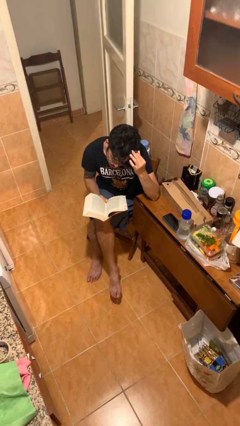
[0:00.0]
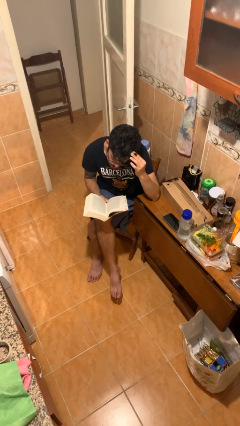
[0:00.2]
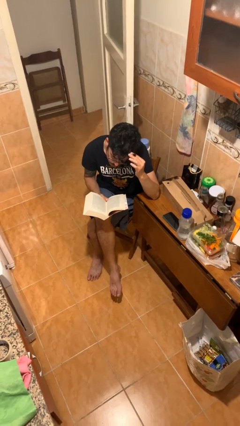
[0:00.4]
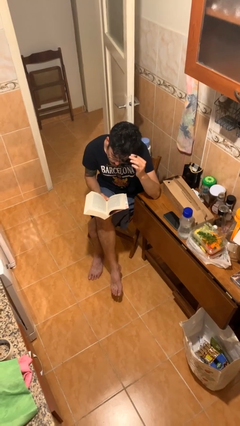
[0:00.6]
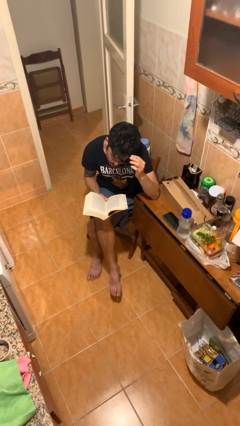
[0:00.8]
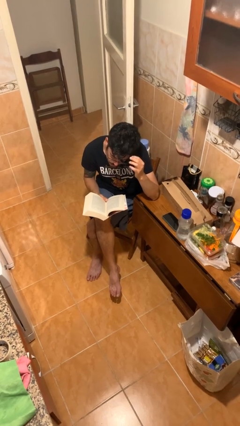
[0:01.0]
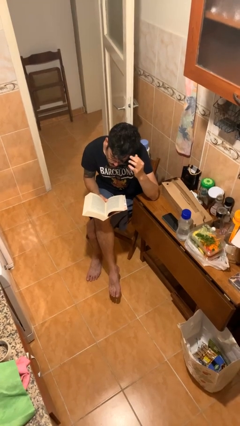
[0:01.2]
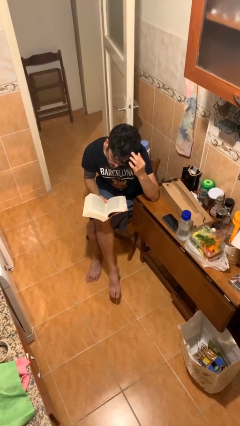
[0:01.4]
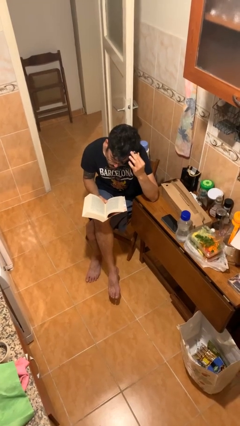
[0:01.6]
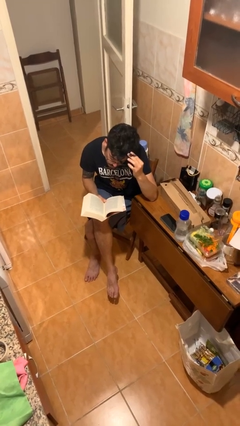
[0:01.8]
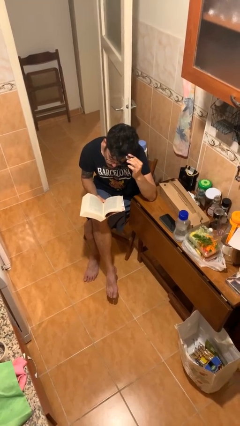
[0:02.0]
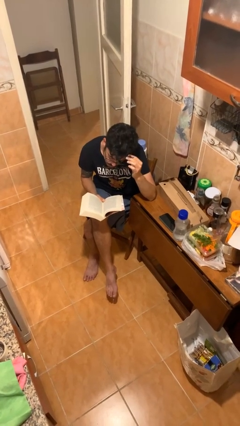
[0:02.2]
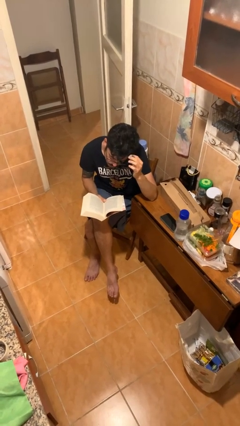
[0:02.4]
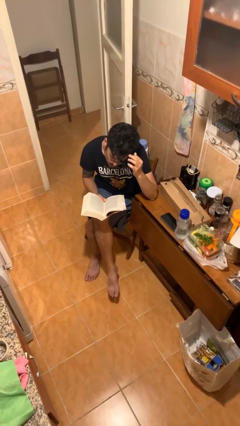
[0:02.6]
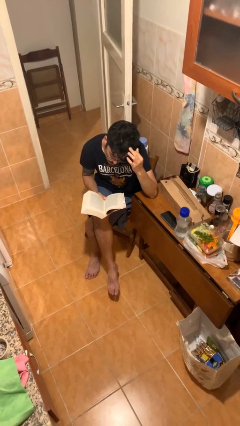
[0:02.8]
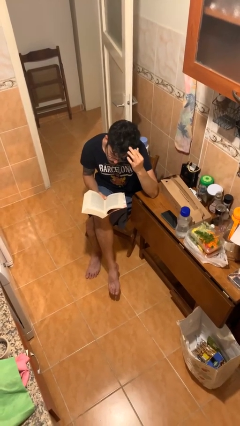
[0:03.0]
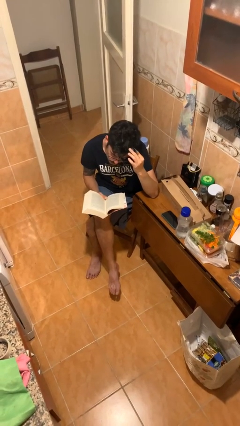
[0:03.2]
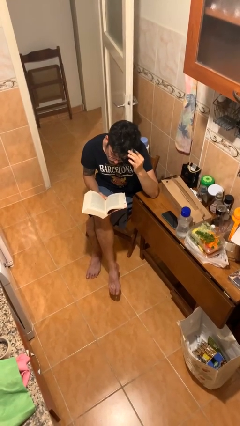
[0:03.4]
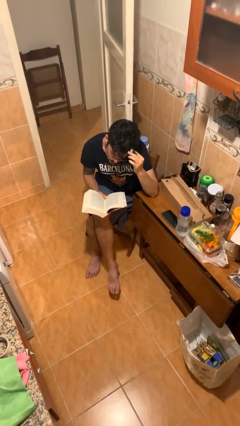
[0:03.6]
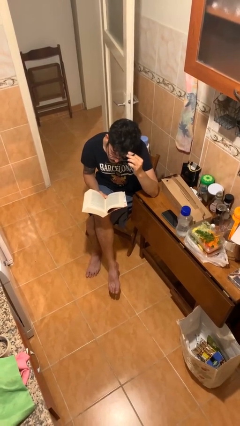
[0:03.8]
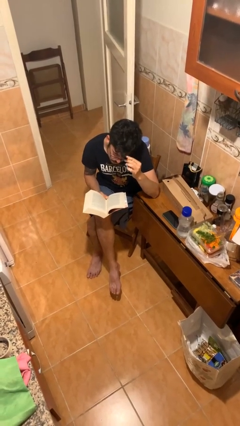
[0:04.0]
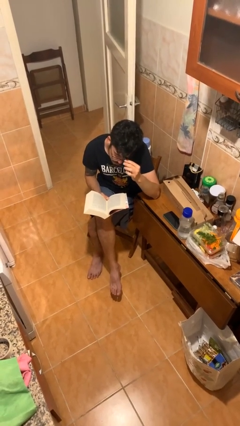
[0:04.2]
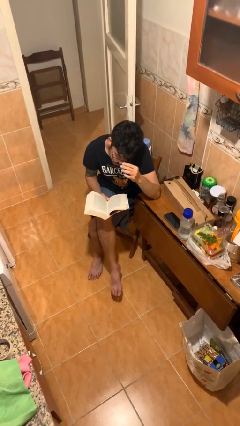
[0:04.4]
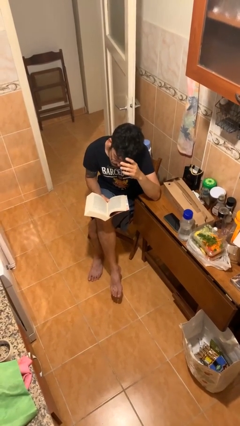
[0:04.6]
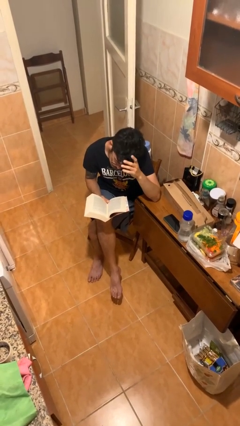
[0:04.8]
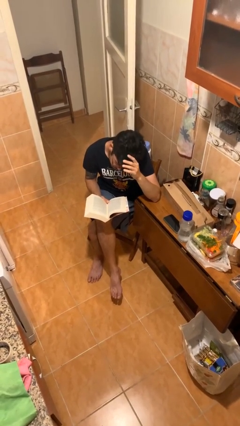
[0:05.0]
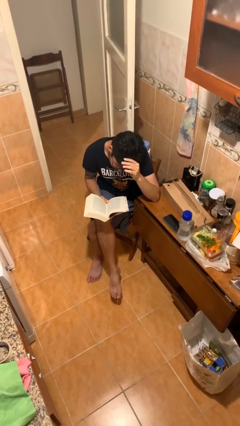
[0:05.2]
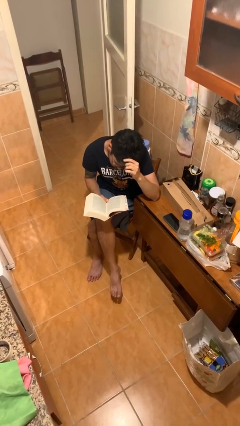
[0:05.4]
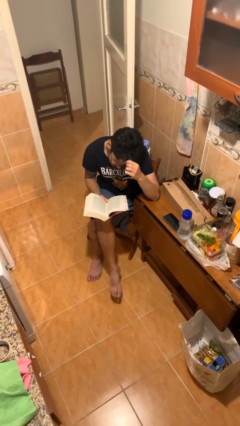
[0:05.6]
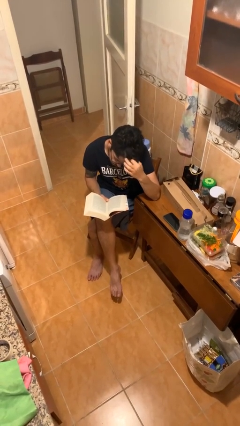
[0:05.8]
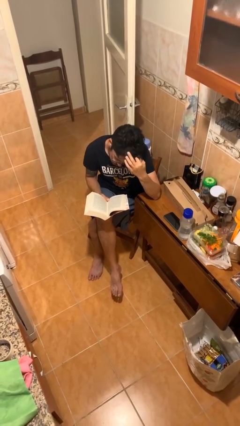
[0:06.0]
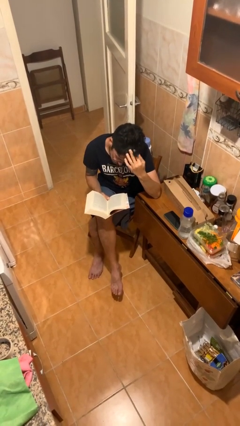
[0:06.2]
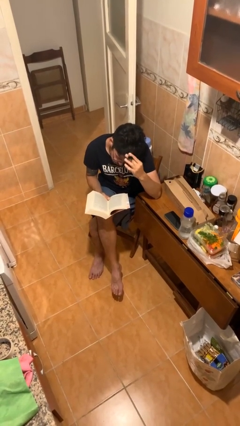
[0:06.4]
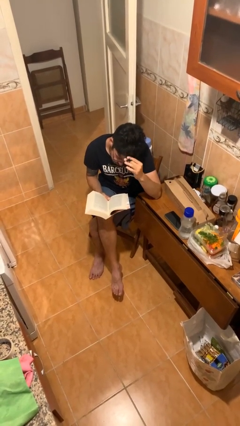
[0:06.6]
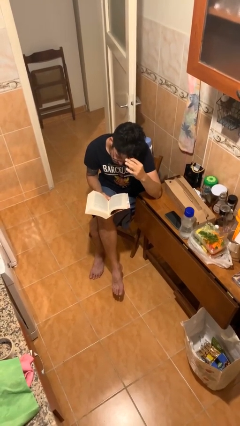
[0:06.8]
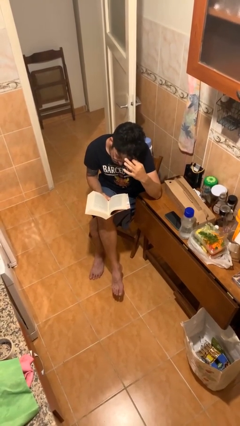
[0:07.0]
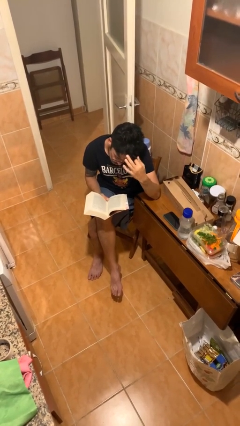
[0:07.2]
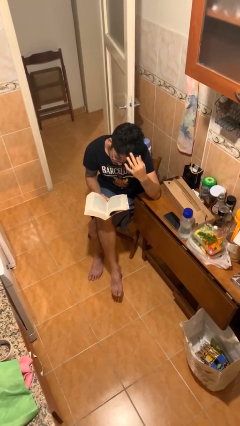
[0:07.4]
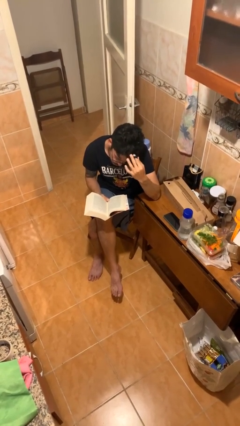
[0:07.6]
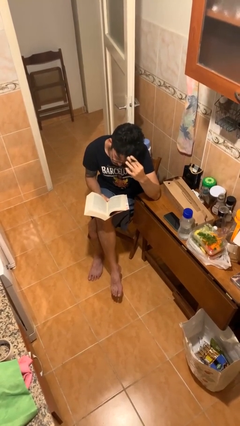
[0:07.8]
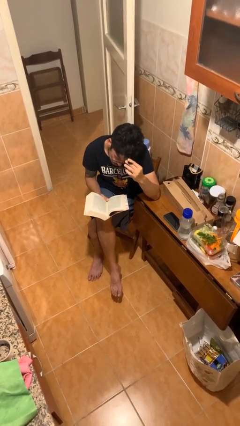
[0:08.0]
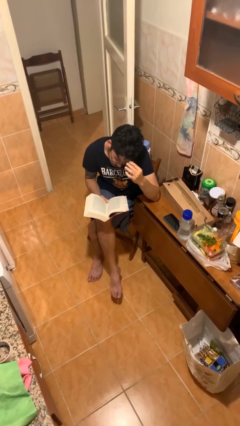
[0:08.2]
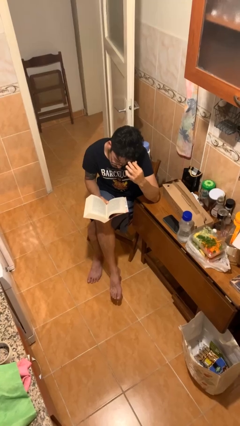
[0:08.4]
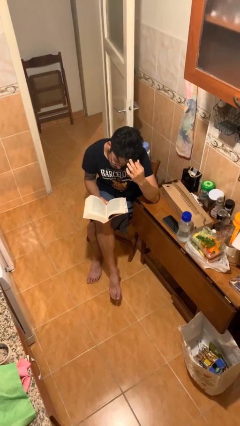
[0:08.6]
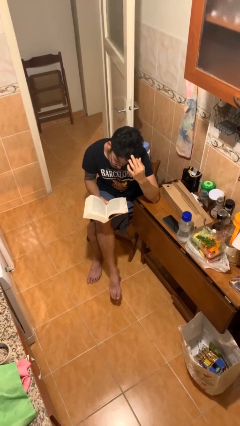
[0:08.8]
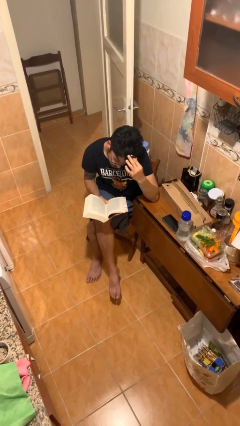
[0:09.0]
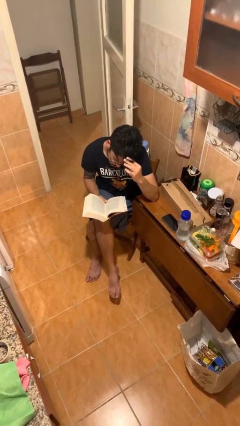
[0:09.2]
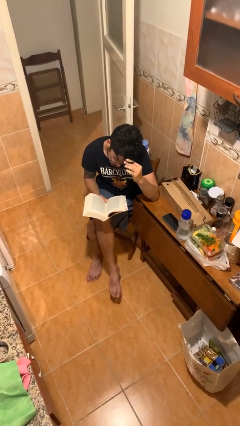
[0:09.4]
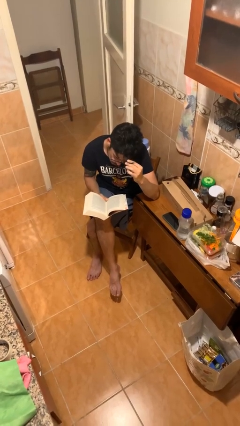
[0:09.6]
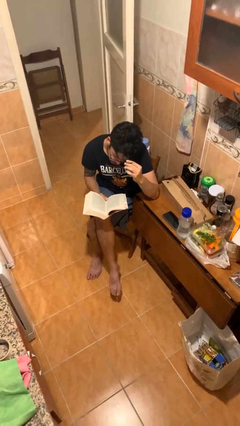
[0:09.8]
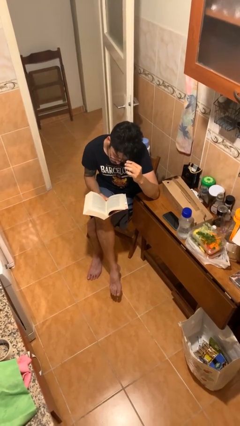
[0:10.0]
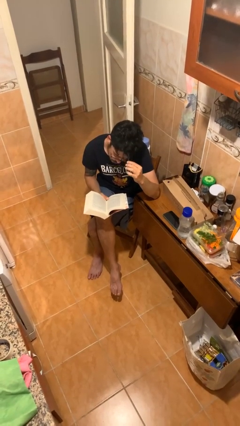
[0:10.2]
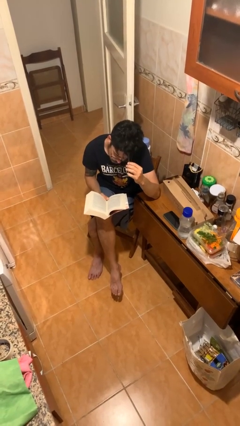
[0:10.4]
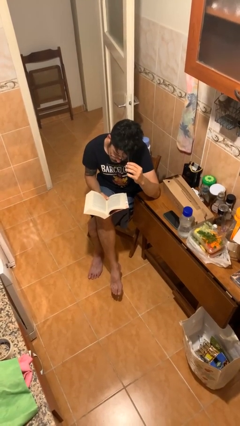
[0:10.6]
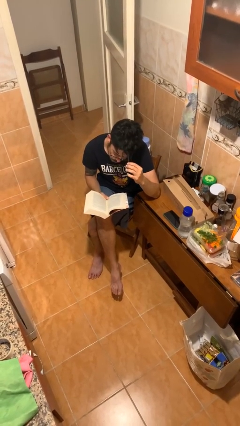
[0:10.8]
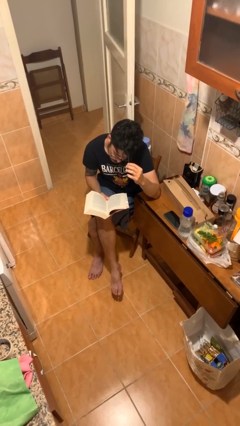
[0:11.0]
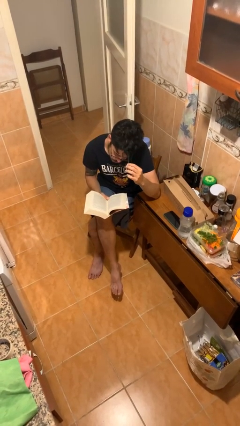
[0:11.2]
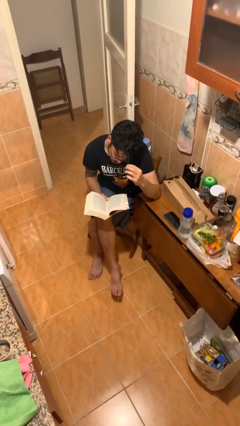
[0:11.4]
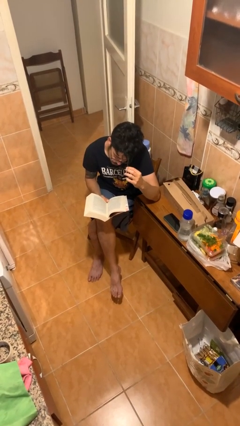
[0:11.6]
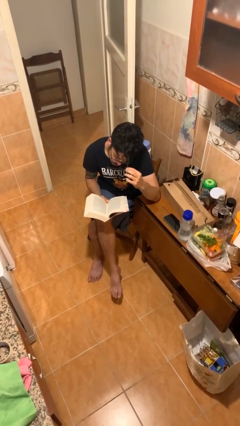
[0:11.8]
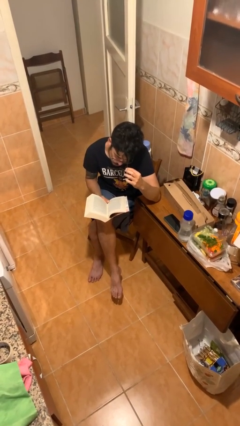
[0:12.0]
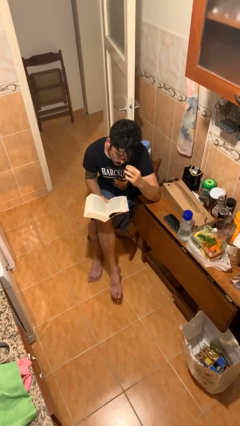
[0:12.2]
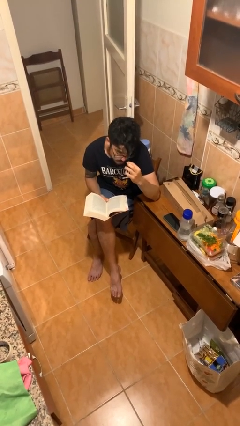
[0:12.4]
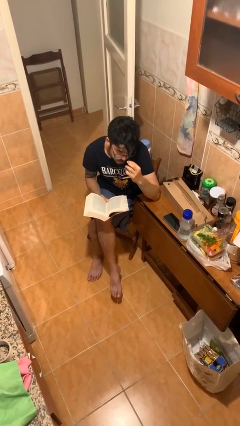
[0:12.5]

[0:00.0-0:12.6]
person reads document

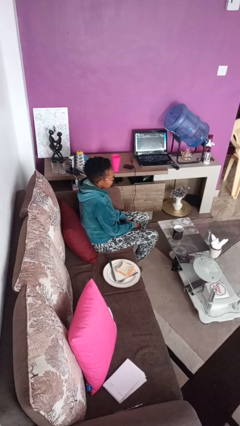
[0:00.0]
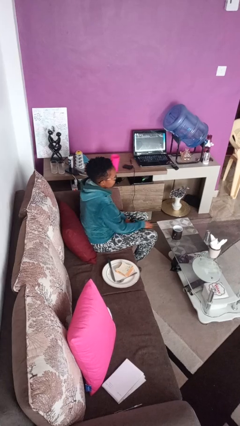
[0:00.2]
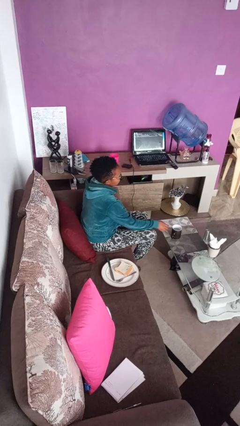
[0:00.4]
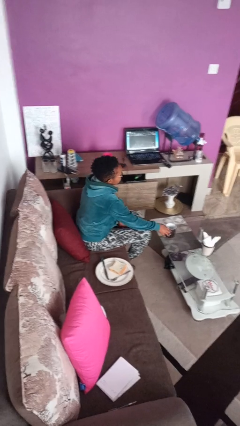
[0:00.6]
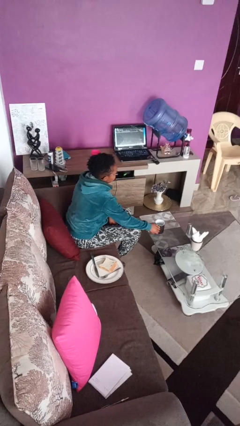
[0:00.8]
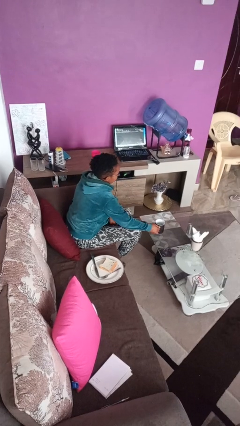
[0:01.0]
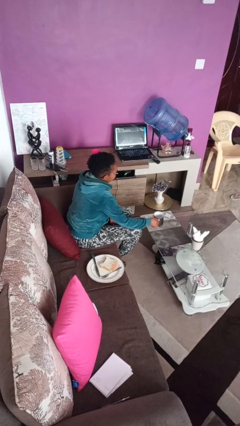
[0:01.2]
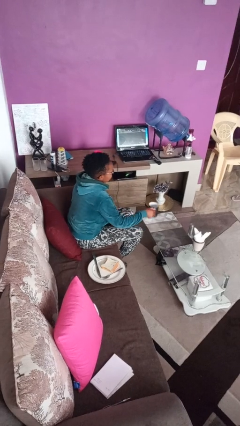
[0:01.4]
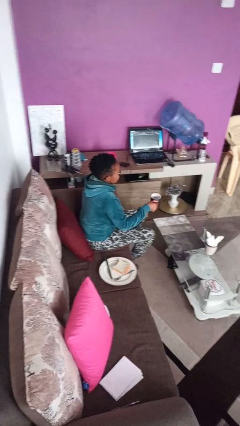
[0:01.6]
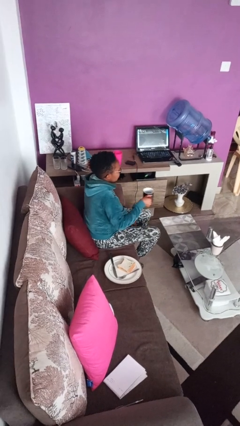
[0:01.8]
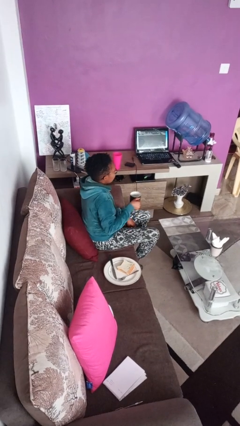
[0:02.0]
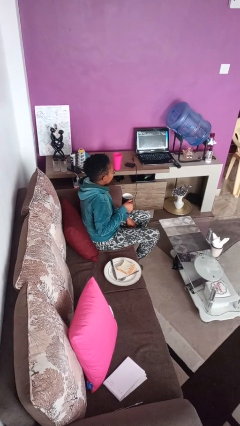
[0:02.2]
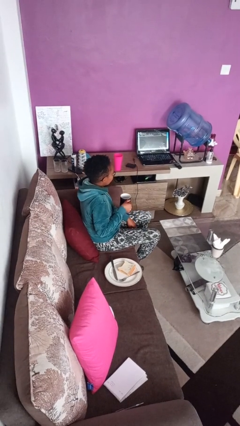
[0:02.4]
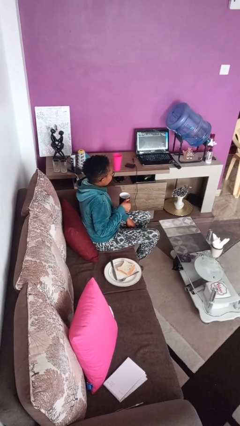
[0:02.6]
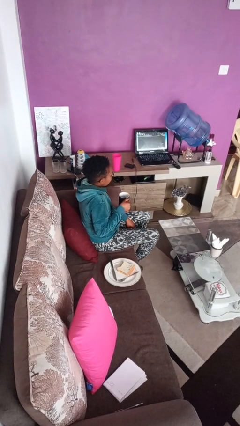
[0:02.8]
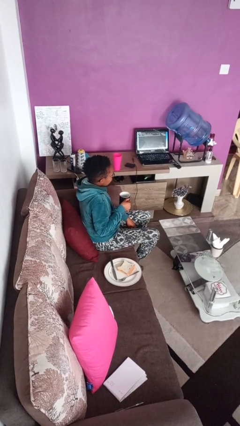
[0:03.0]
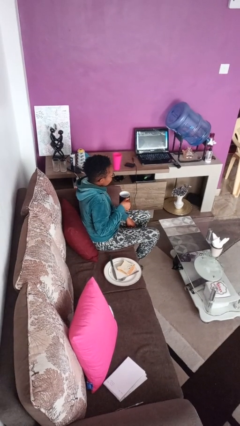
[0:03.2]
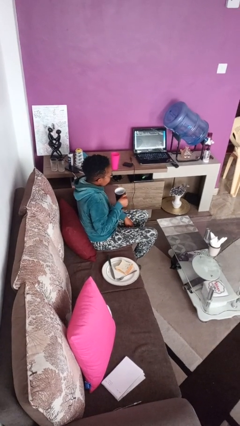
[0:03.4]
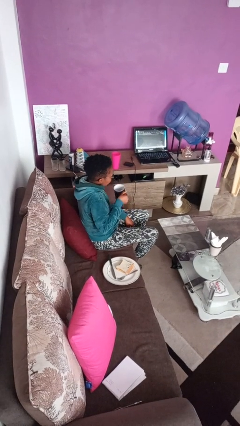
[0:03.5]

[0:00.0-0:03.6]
person picks up object from table

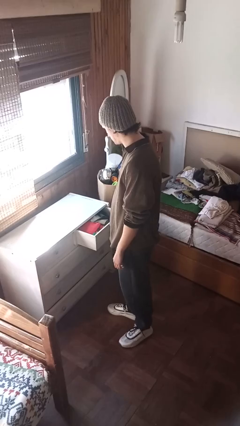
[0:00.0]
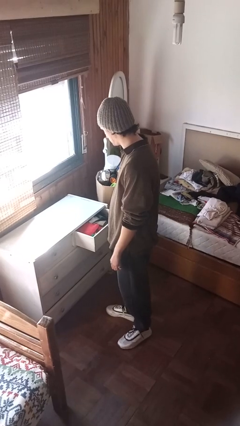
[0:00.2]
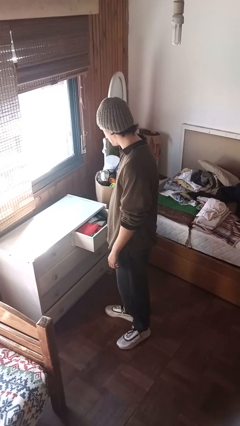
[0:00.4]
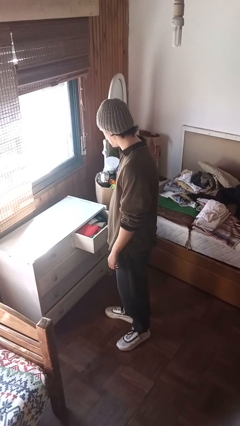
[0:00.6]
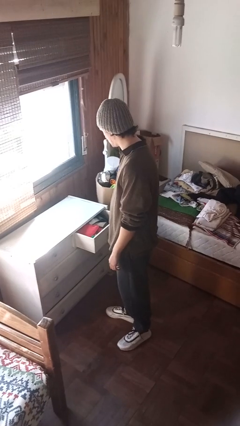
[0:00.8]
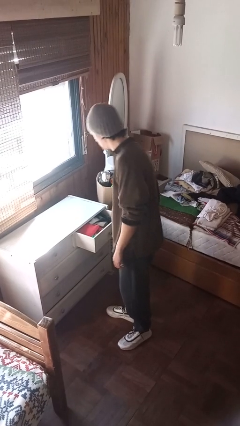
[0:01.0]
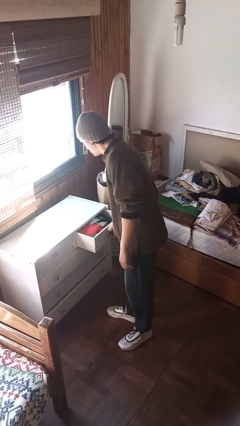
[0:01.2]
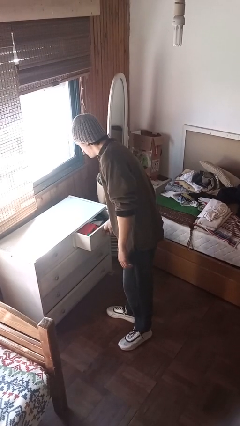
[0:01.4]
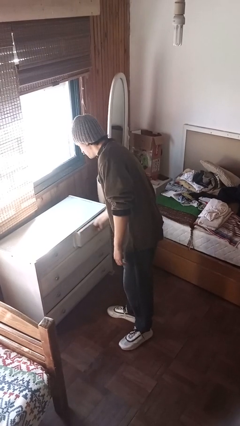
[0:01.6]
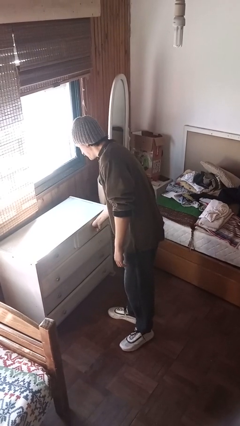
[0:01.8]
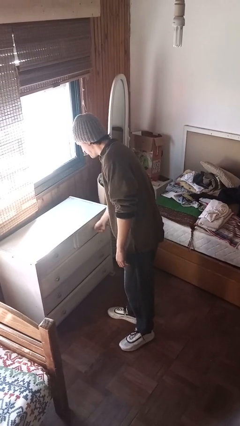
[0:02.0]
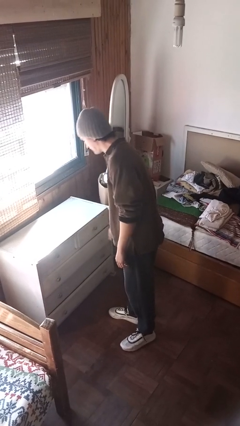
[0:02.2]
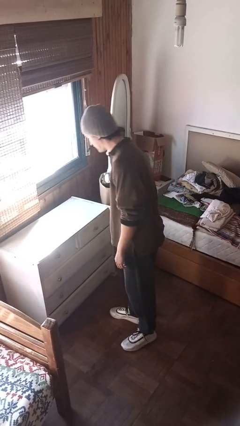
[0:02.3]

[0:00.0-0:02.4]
person closes dresser drawer
